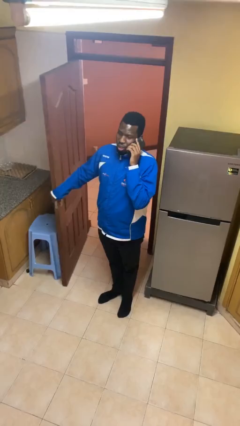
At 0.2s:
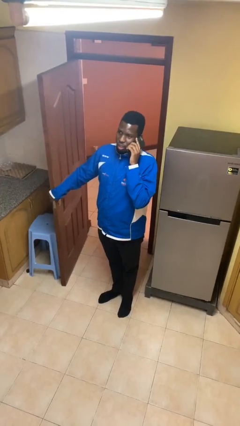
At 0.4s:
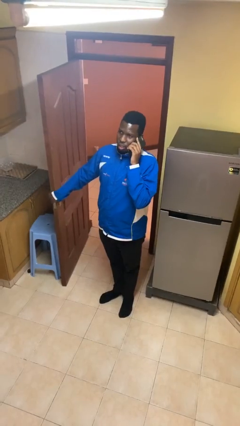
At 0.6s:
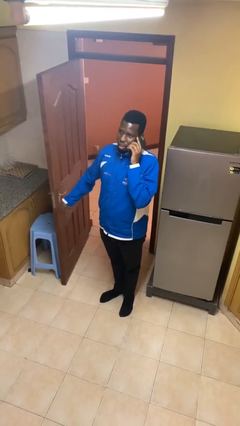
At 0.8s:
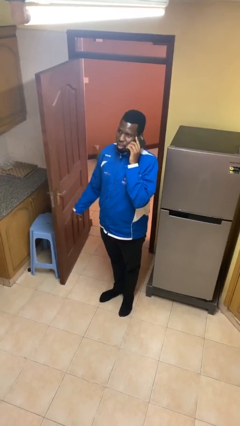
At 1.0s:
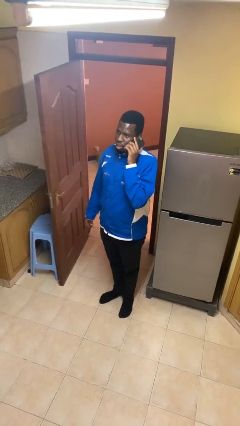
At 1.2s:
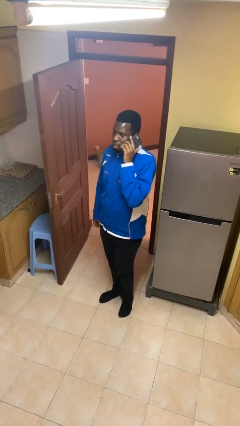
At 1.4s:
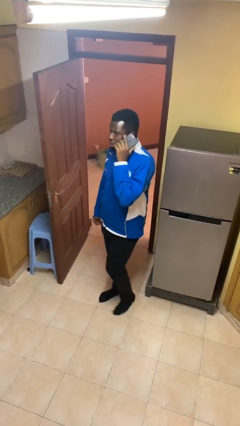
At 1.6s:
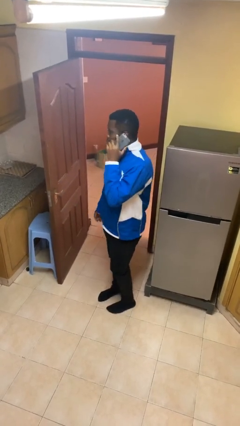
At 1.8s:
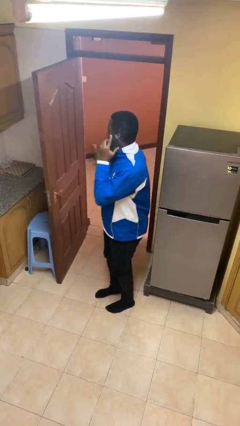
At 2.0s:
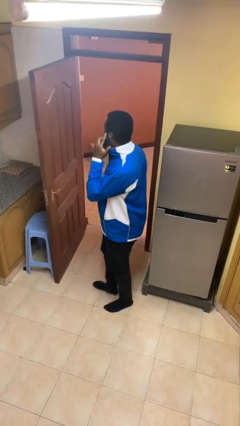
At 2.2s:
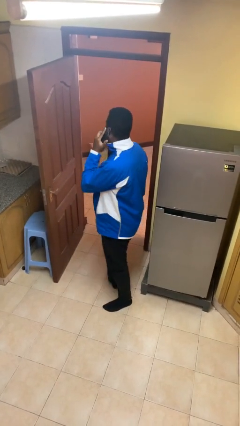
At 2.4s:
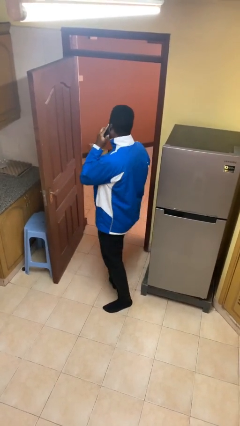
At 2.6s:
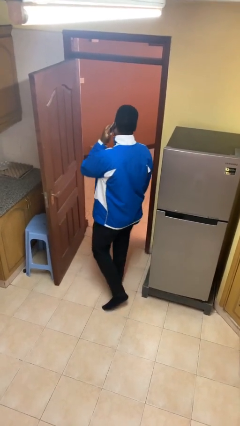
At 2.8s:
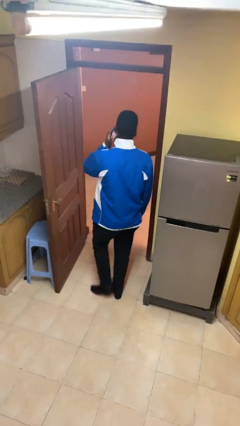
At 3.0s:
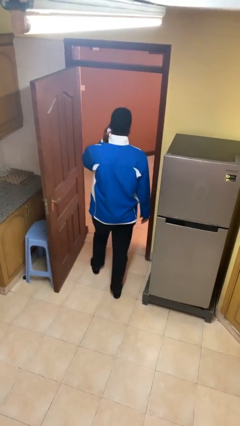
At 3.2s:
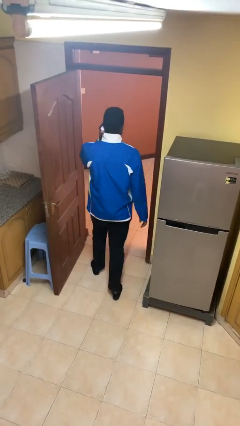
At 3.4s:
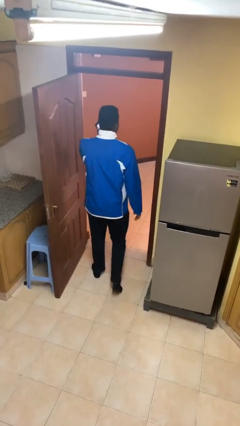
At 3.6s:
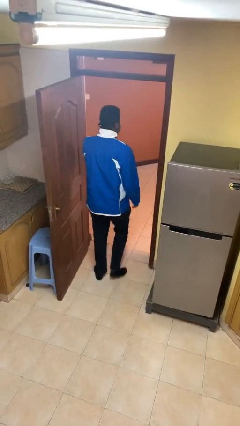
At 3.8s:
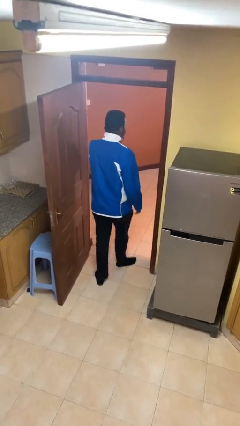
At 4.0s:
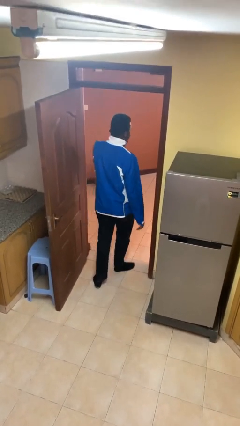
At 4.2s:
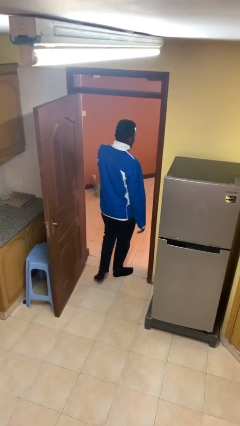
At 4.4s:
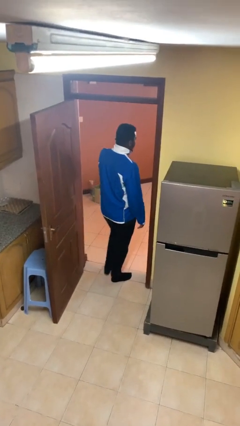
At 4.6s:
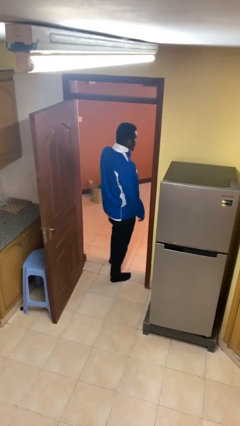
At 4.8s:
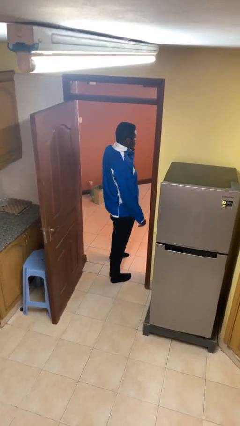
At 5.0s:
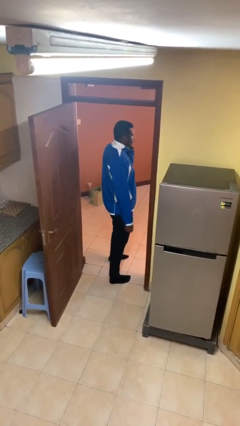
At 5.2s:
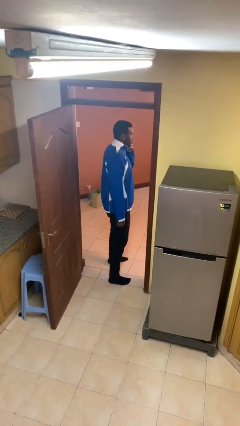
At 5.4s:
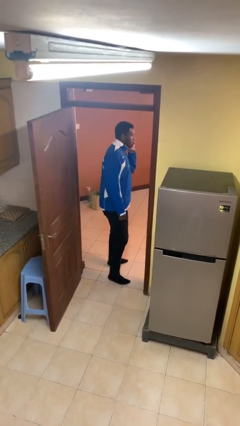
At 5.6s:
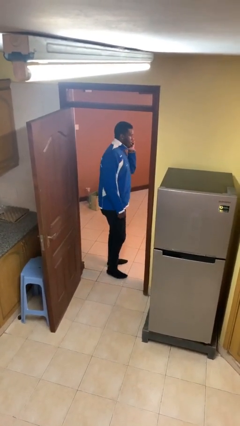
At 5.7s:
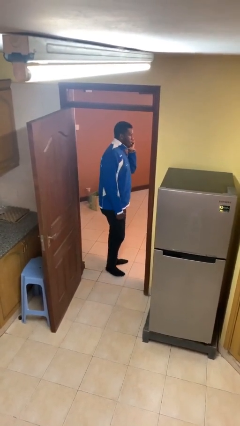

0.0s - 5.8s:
person exits scene through structure

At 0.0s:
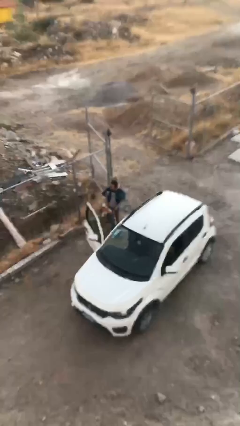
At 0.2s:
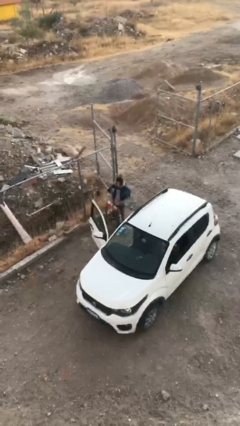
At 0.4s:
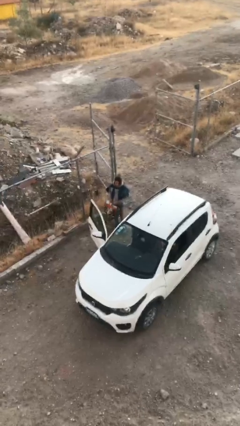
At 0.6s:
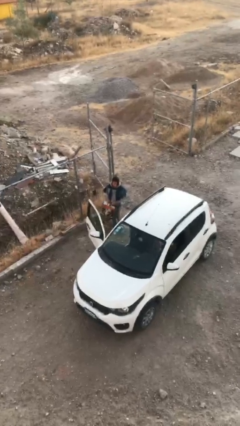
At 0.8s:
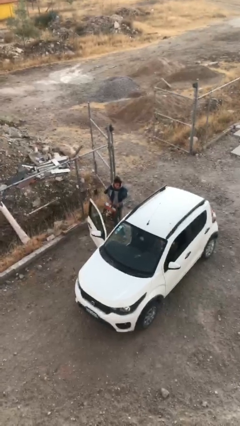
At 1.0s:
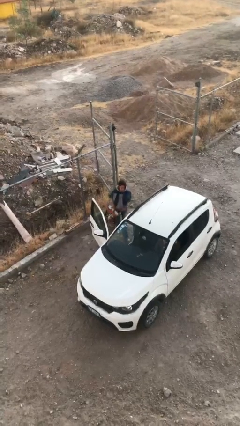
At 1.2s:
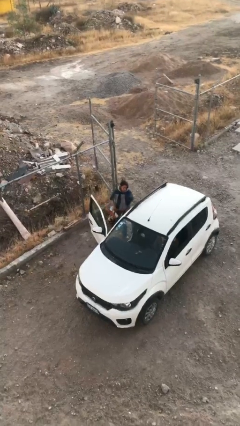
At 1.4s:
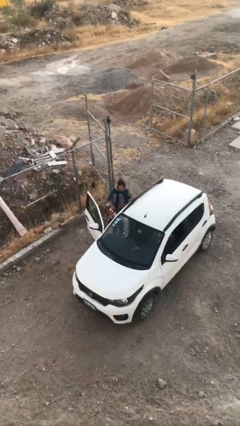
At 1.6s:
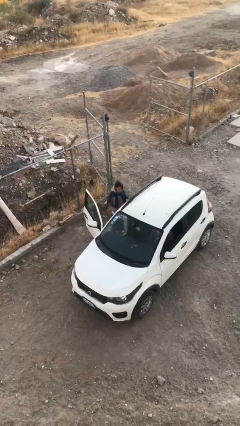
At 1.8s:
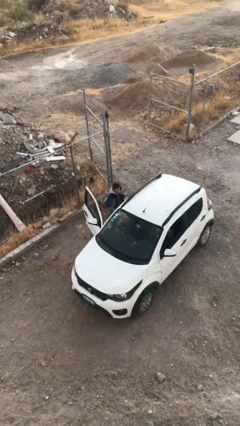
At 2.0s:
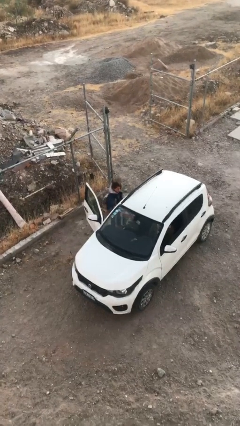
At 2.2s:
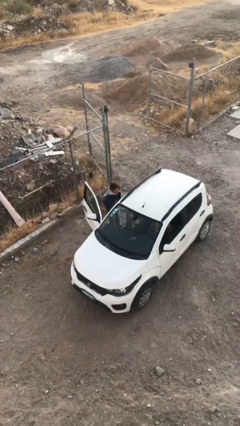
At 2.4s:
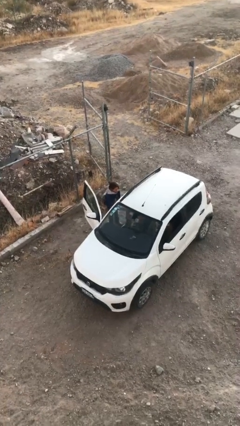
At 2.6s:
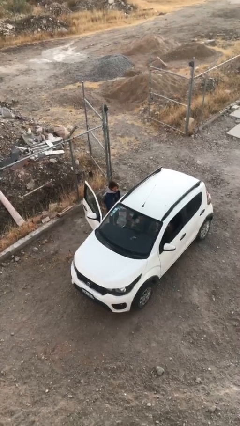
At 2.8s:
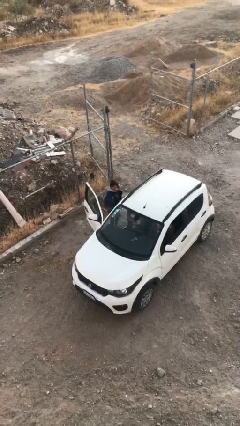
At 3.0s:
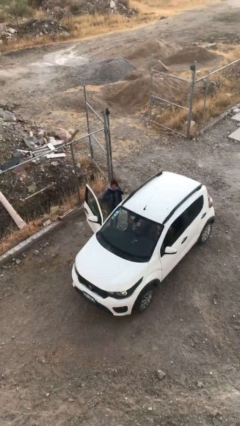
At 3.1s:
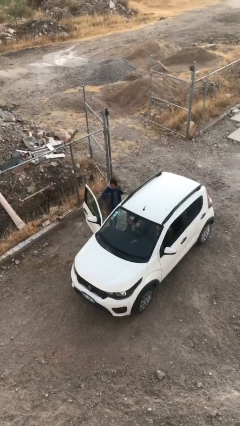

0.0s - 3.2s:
person loads car

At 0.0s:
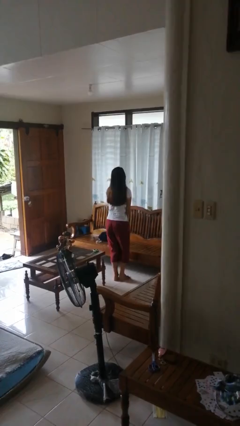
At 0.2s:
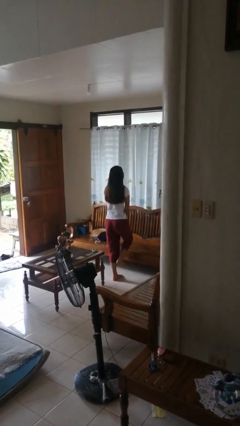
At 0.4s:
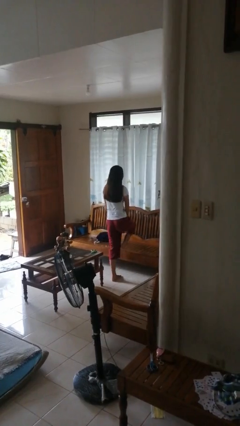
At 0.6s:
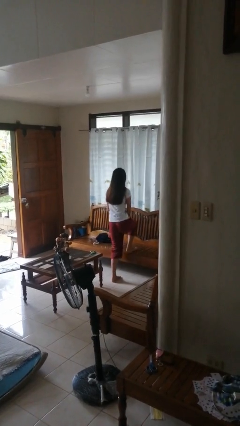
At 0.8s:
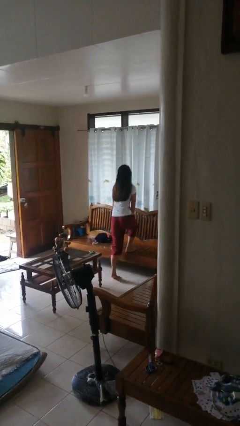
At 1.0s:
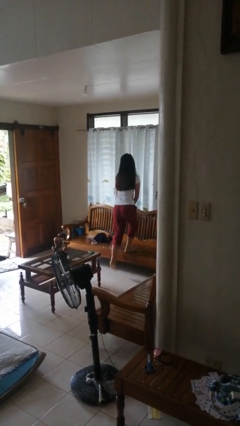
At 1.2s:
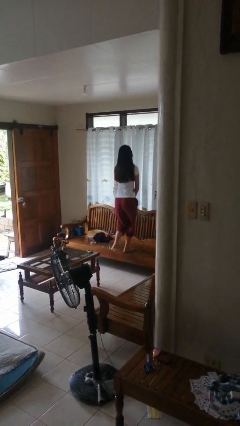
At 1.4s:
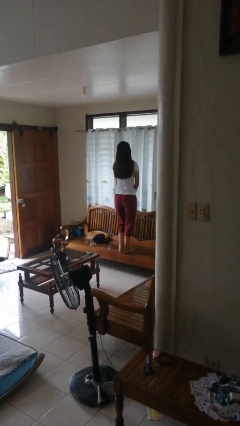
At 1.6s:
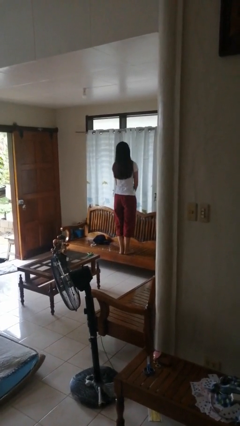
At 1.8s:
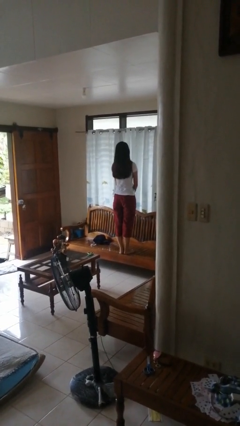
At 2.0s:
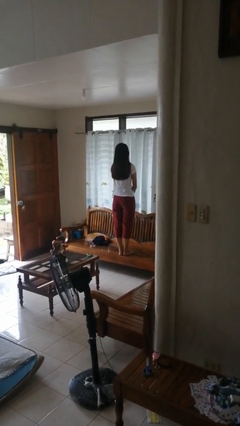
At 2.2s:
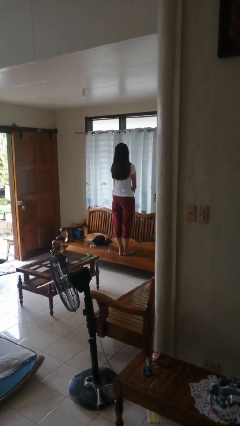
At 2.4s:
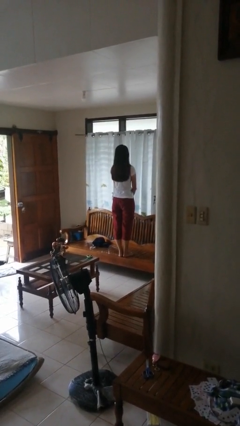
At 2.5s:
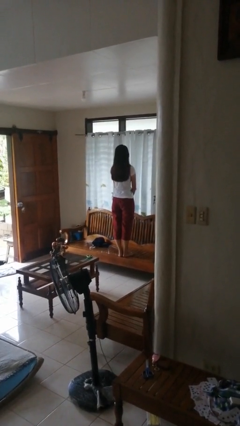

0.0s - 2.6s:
person climbs on chair

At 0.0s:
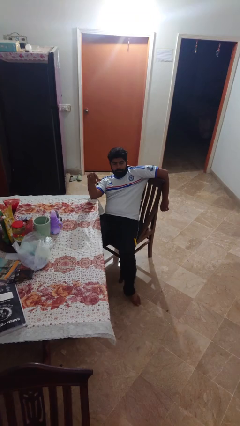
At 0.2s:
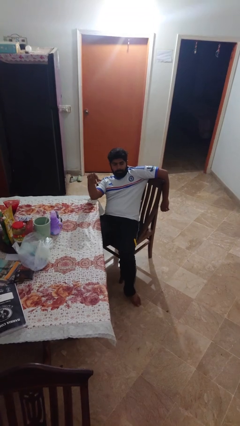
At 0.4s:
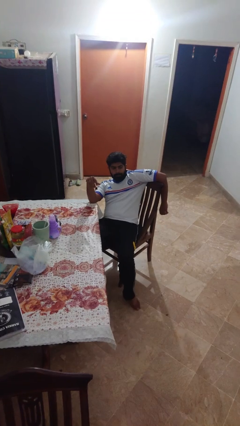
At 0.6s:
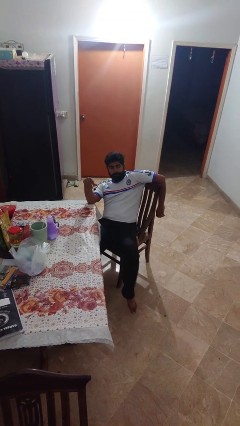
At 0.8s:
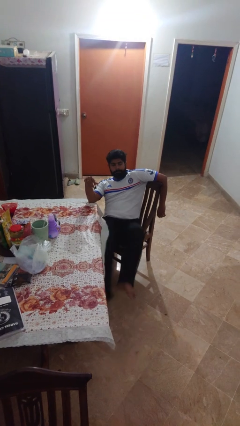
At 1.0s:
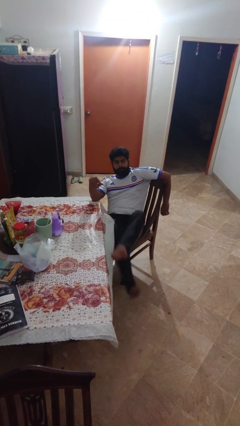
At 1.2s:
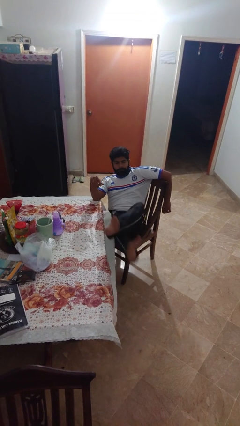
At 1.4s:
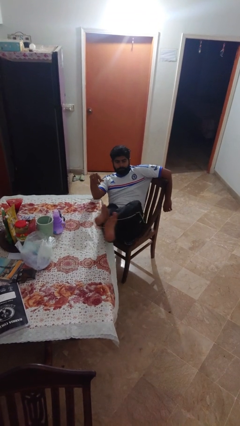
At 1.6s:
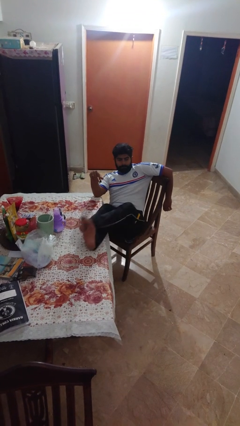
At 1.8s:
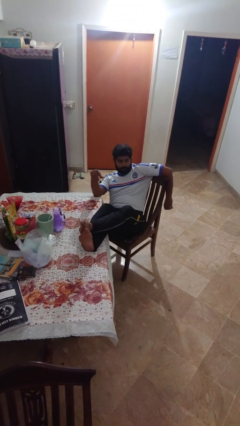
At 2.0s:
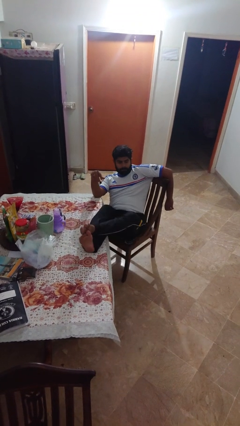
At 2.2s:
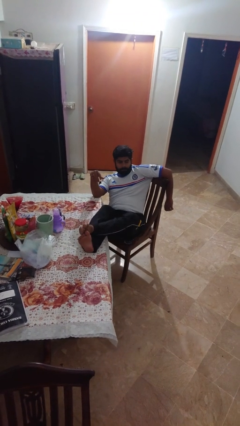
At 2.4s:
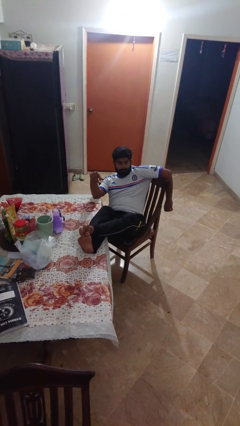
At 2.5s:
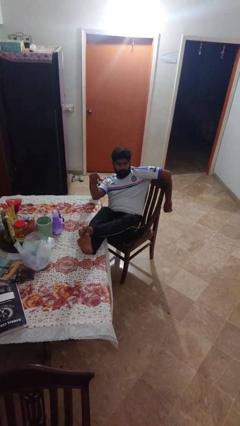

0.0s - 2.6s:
person puts feet up

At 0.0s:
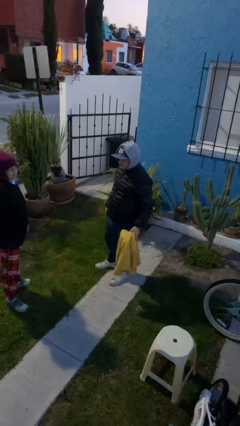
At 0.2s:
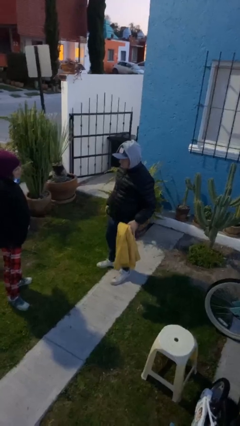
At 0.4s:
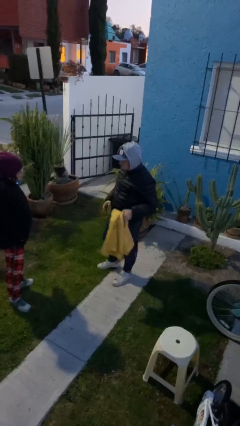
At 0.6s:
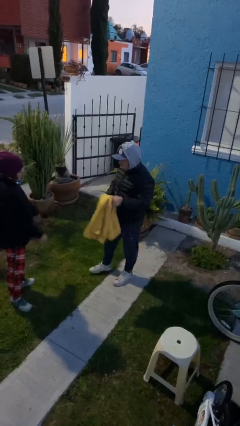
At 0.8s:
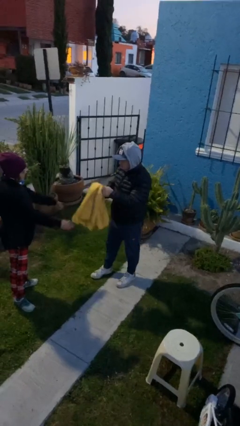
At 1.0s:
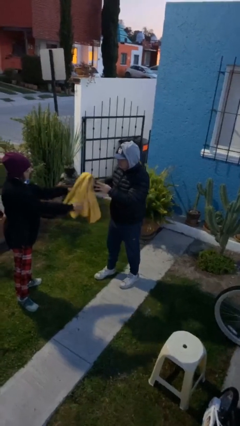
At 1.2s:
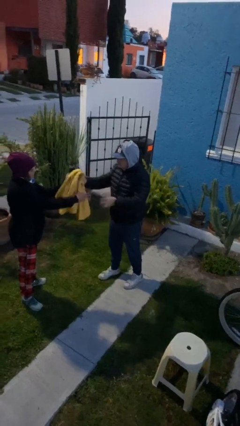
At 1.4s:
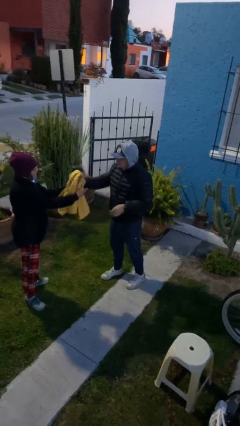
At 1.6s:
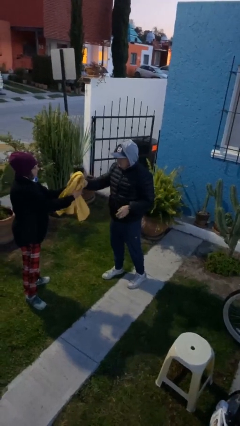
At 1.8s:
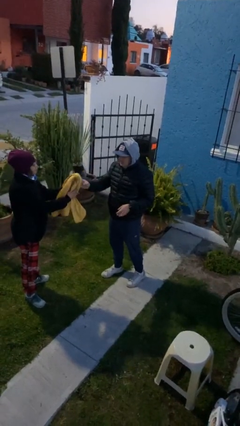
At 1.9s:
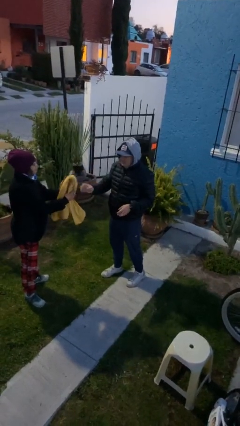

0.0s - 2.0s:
person transfers object to person

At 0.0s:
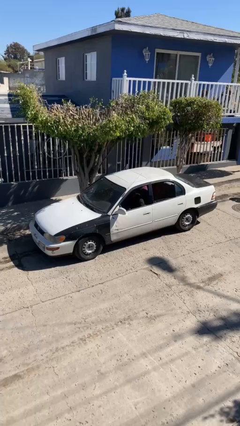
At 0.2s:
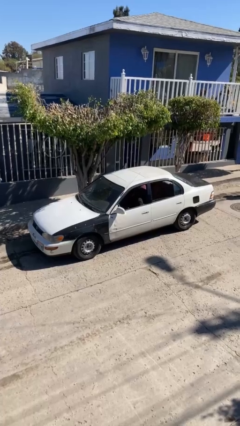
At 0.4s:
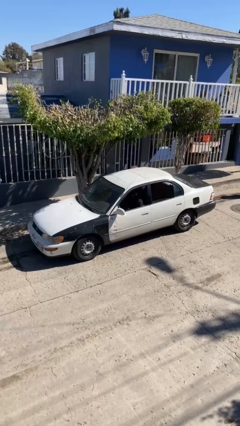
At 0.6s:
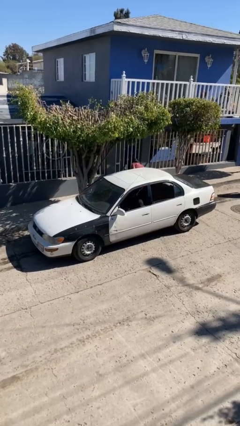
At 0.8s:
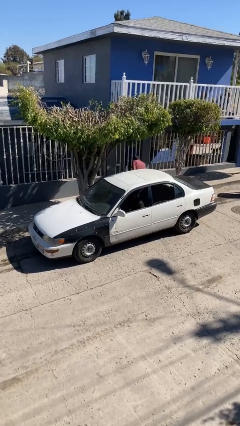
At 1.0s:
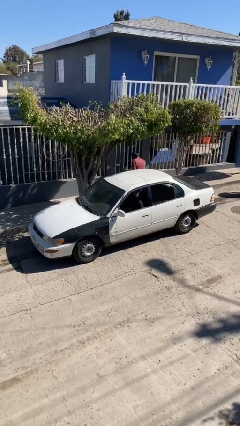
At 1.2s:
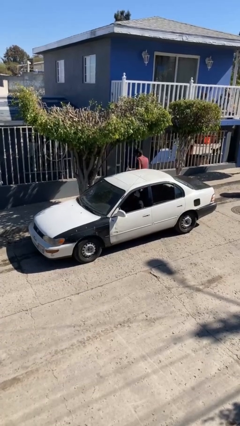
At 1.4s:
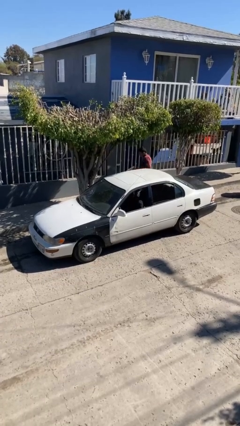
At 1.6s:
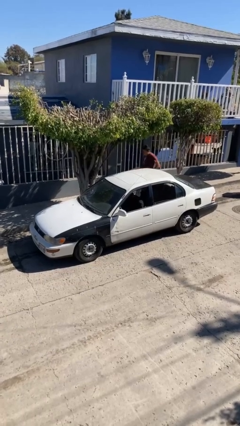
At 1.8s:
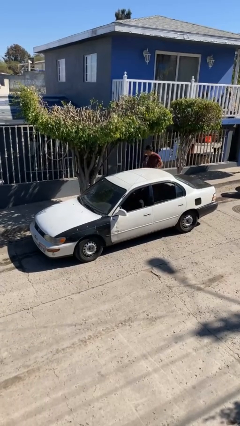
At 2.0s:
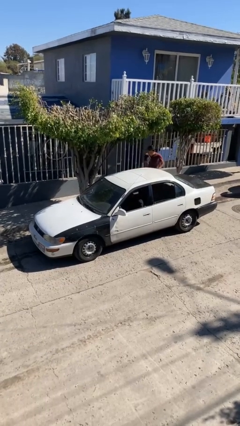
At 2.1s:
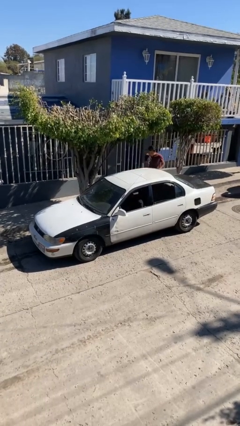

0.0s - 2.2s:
car drops off person
